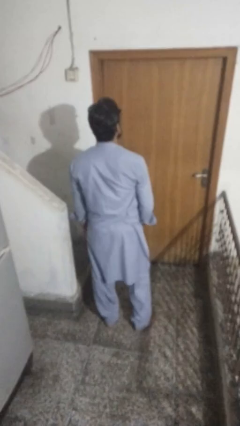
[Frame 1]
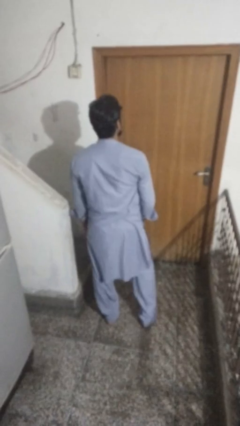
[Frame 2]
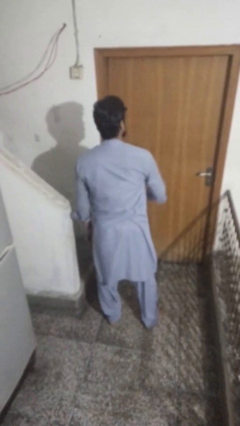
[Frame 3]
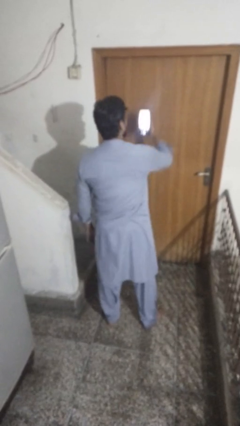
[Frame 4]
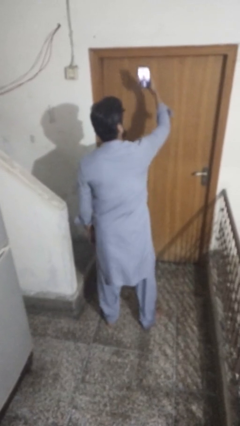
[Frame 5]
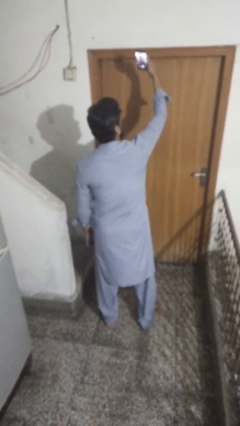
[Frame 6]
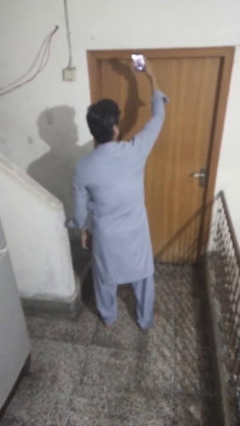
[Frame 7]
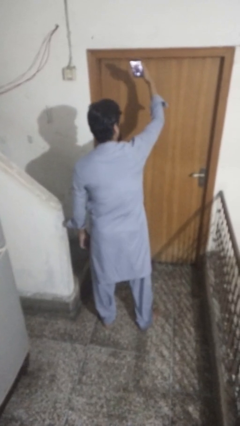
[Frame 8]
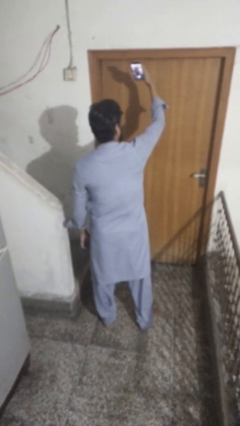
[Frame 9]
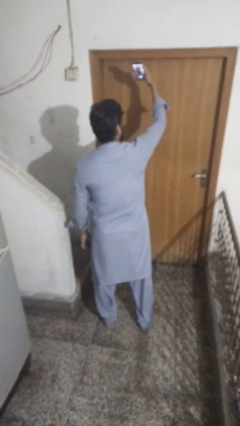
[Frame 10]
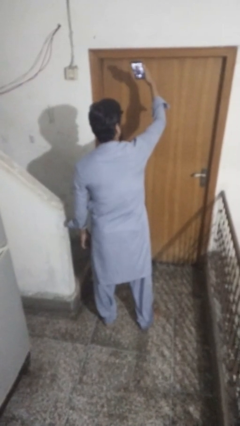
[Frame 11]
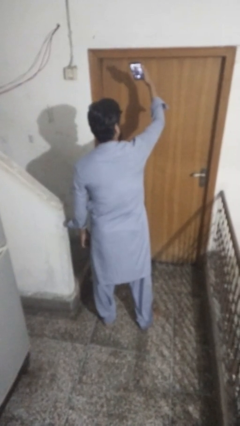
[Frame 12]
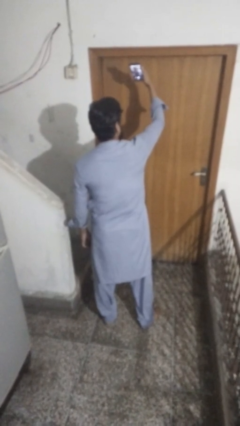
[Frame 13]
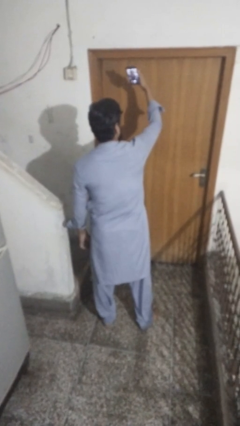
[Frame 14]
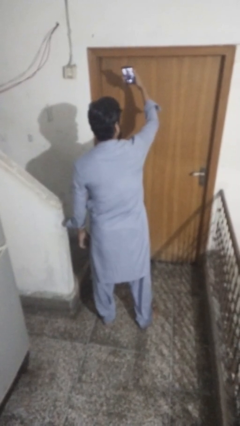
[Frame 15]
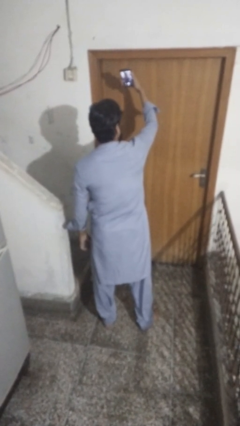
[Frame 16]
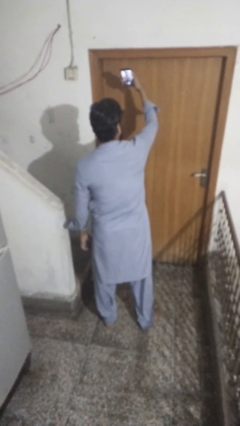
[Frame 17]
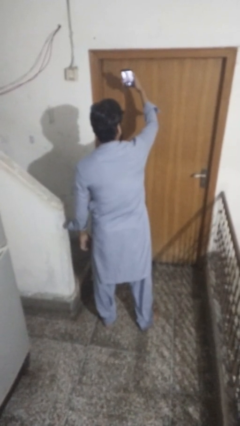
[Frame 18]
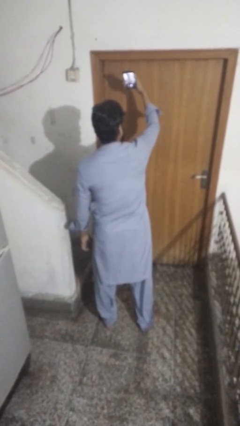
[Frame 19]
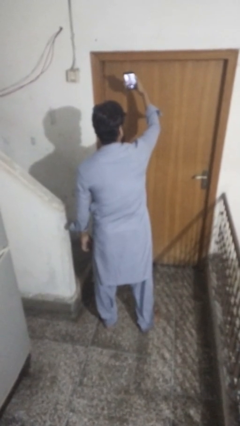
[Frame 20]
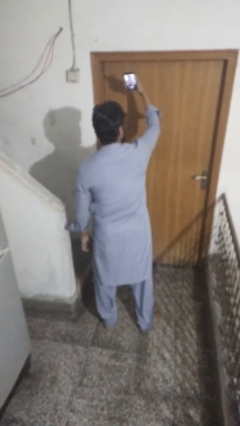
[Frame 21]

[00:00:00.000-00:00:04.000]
person takes selfie

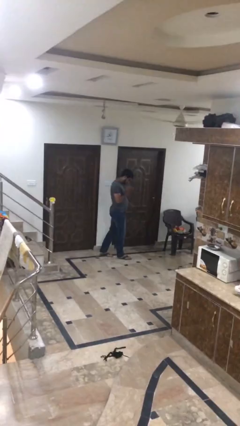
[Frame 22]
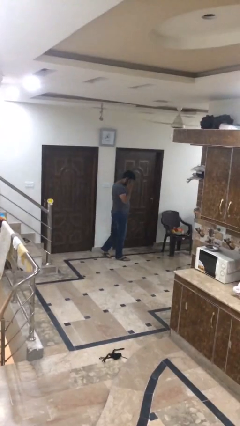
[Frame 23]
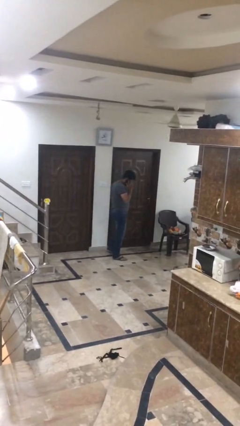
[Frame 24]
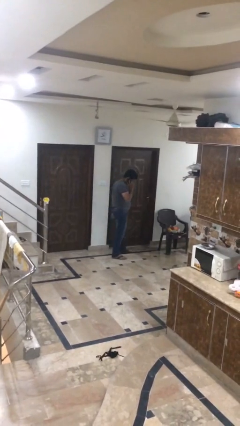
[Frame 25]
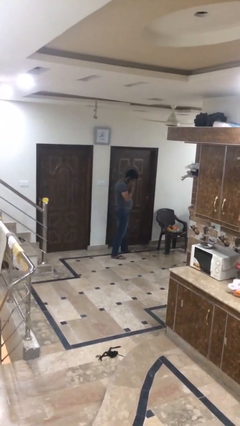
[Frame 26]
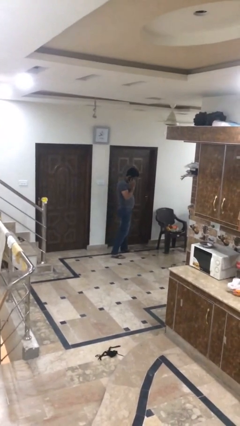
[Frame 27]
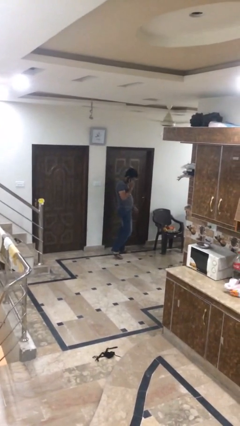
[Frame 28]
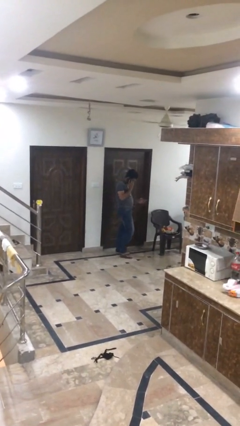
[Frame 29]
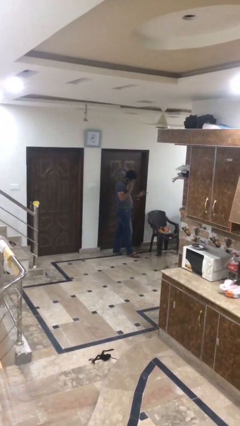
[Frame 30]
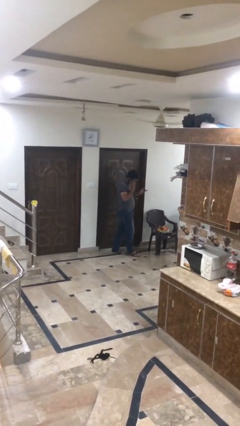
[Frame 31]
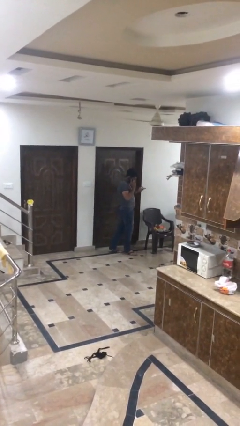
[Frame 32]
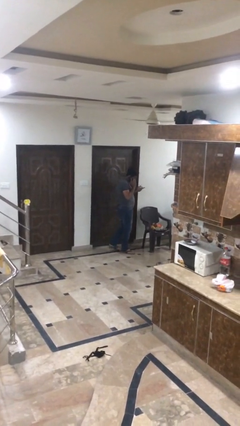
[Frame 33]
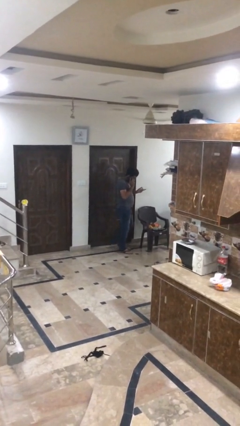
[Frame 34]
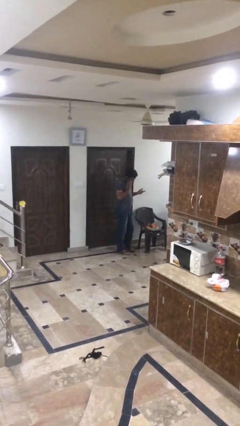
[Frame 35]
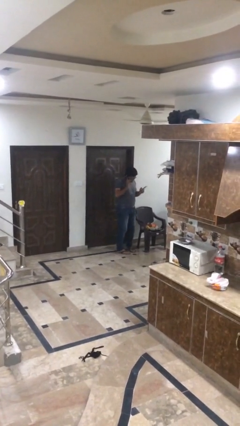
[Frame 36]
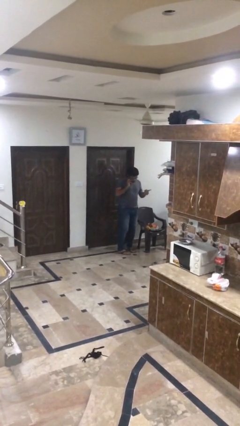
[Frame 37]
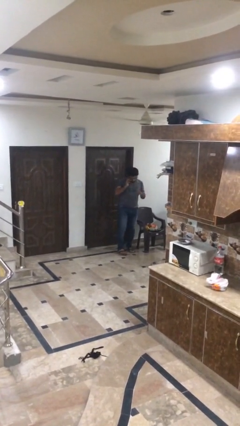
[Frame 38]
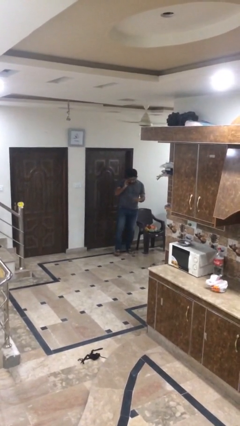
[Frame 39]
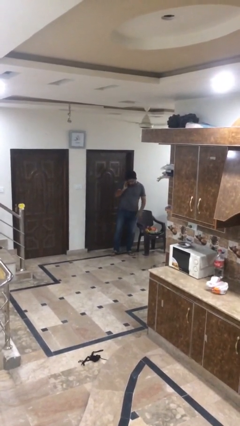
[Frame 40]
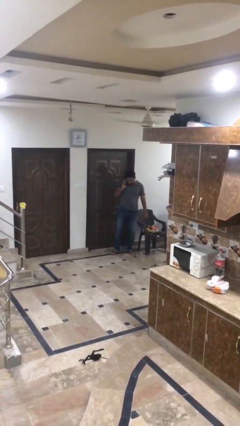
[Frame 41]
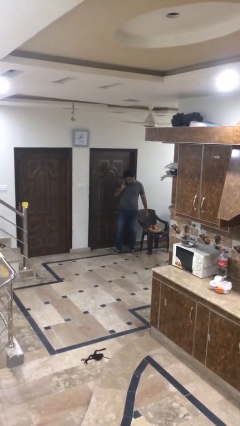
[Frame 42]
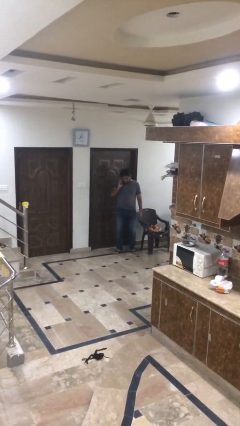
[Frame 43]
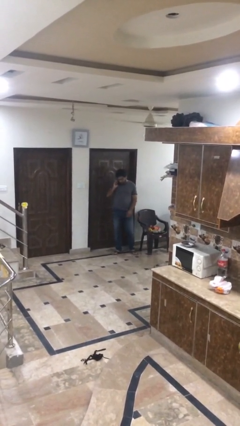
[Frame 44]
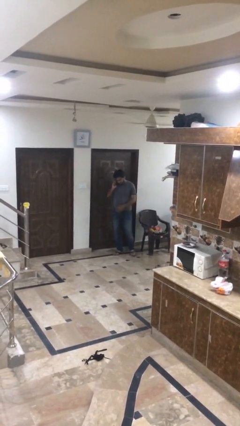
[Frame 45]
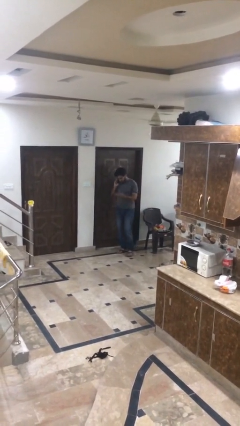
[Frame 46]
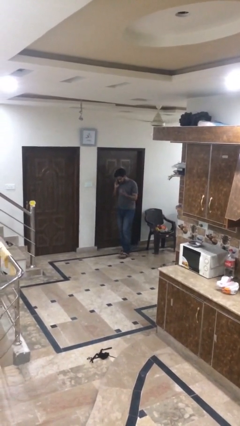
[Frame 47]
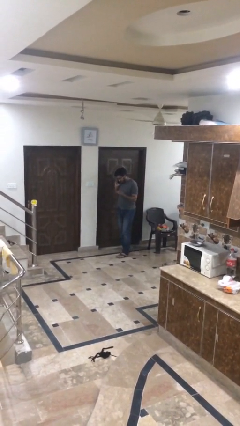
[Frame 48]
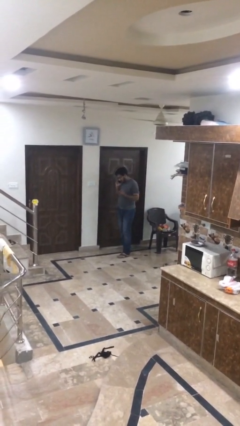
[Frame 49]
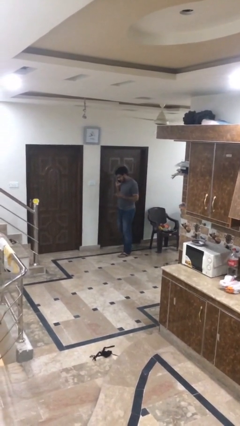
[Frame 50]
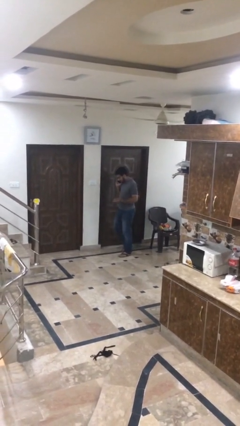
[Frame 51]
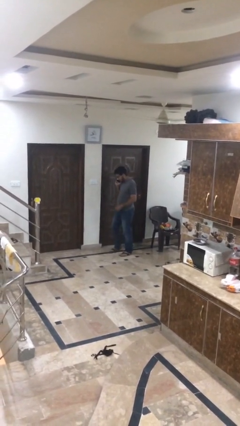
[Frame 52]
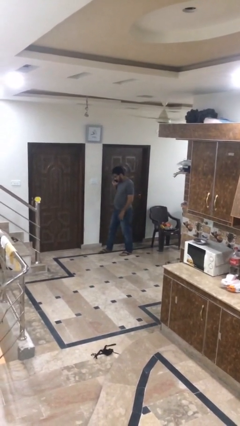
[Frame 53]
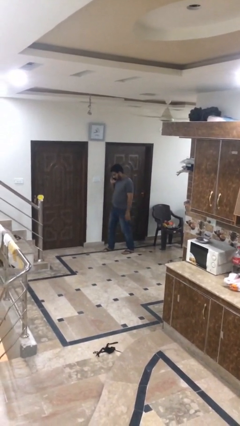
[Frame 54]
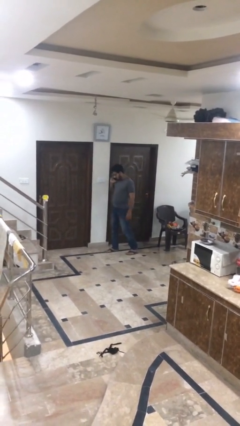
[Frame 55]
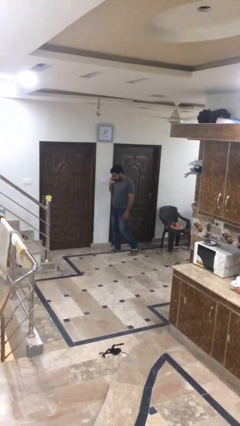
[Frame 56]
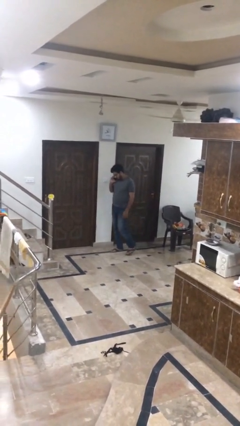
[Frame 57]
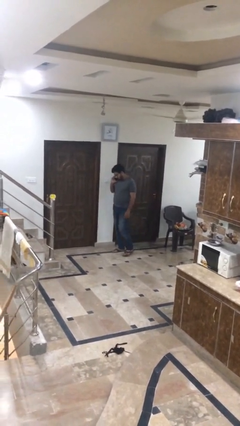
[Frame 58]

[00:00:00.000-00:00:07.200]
person talks on phone

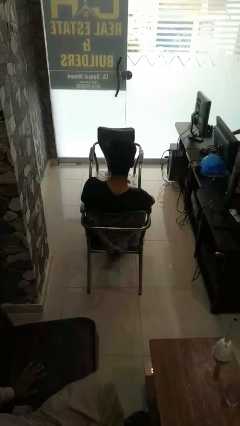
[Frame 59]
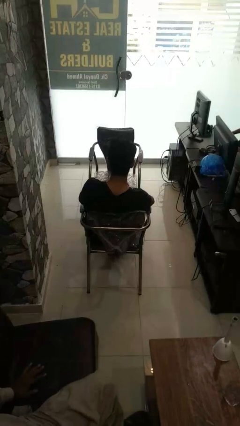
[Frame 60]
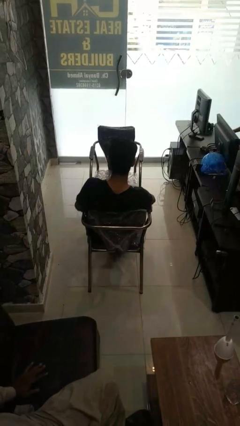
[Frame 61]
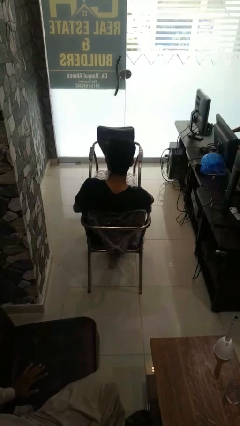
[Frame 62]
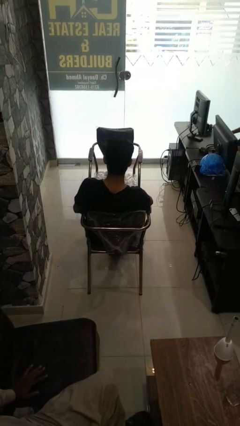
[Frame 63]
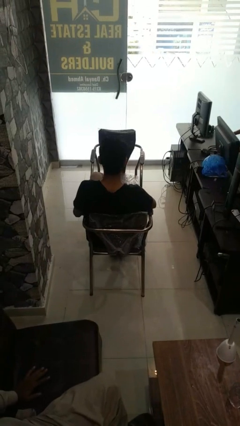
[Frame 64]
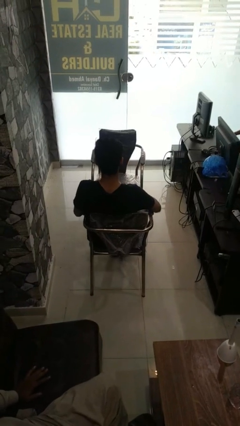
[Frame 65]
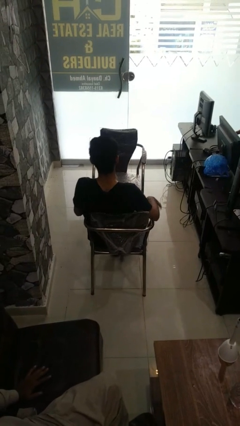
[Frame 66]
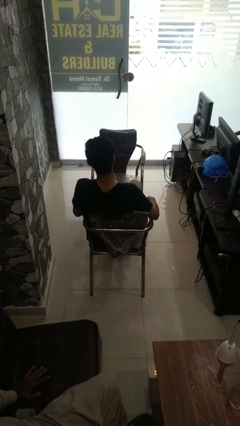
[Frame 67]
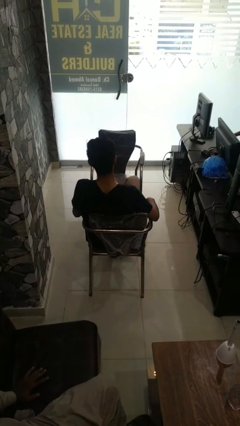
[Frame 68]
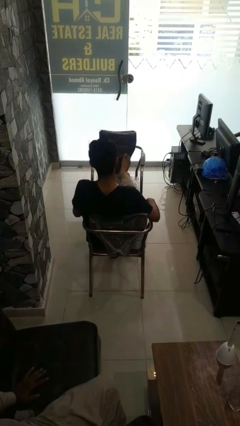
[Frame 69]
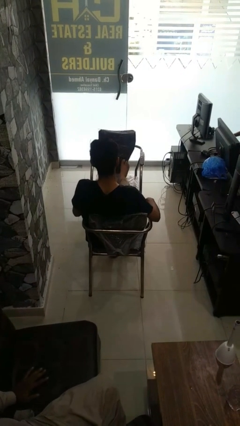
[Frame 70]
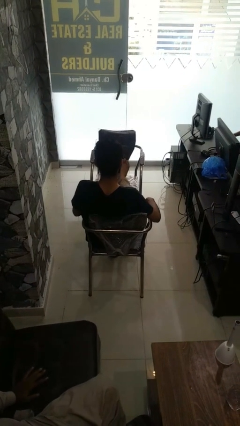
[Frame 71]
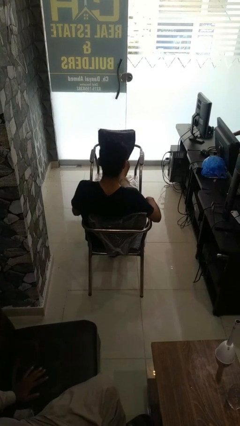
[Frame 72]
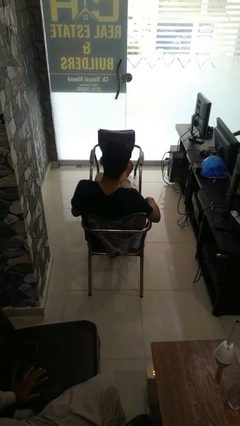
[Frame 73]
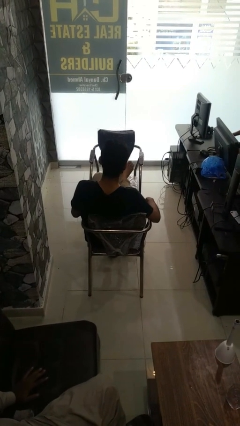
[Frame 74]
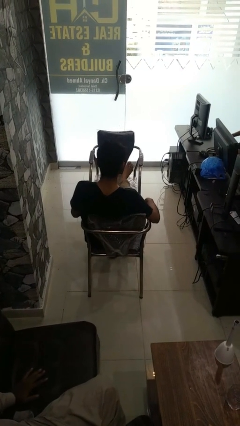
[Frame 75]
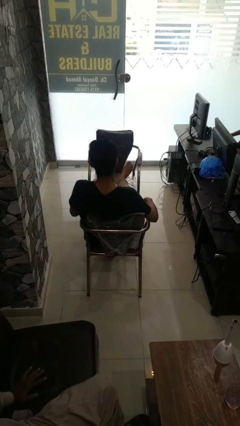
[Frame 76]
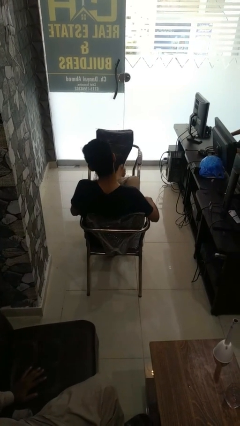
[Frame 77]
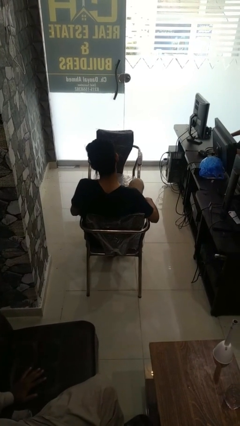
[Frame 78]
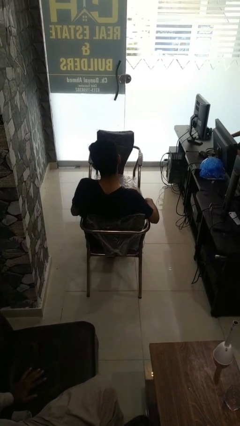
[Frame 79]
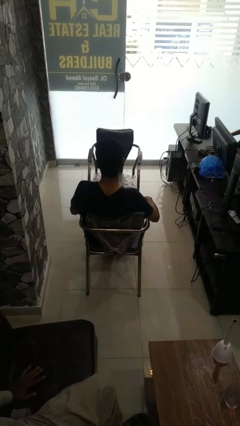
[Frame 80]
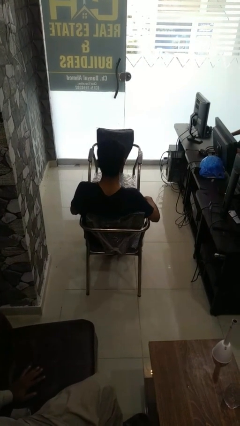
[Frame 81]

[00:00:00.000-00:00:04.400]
person puts feet up

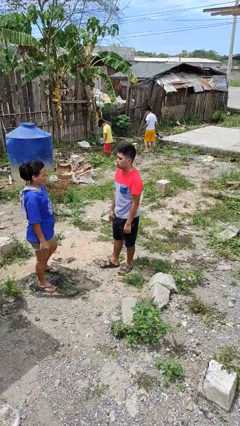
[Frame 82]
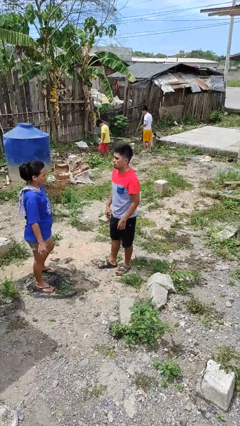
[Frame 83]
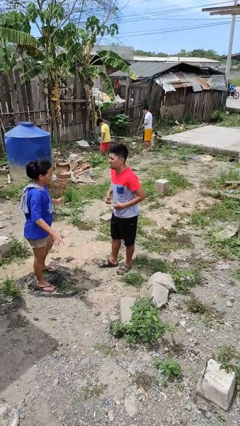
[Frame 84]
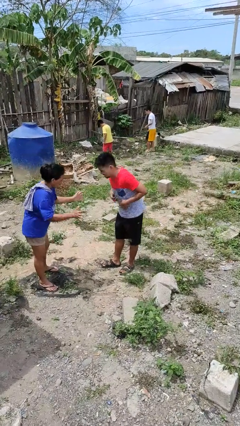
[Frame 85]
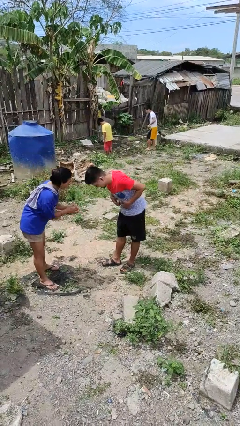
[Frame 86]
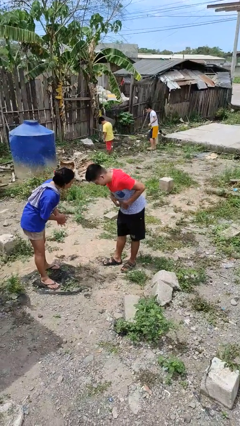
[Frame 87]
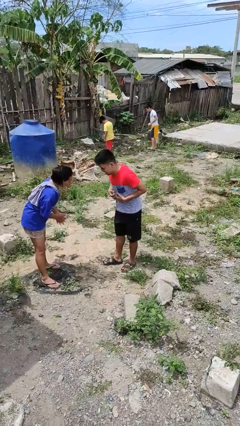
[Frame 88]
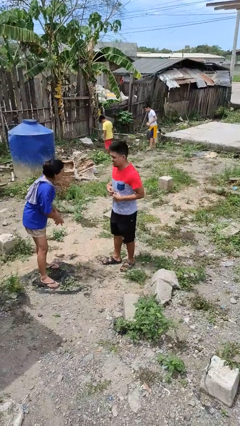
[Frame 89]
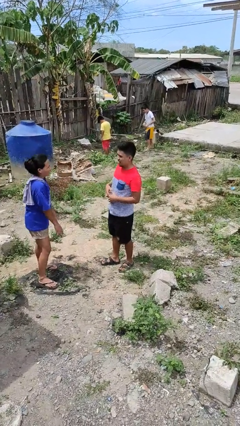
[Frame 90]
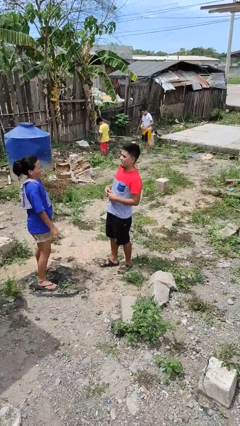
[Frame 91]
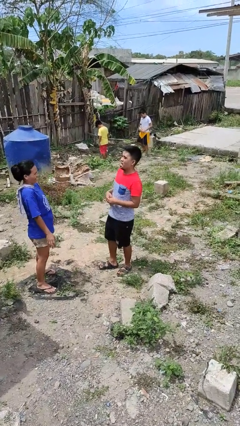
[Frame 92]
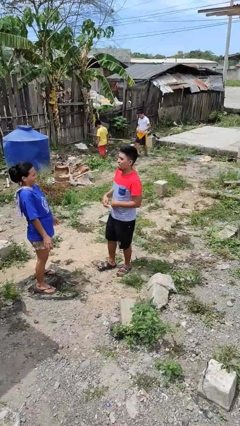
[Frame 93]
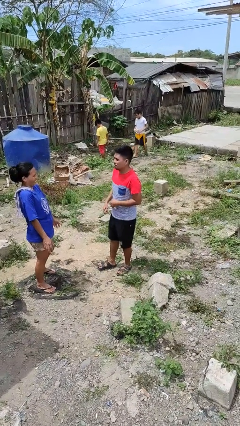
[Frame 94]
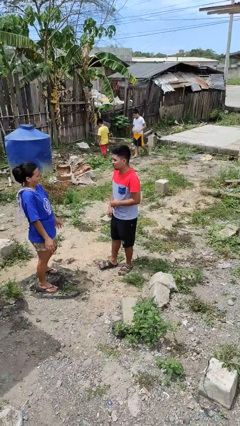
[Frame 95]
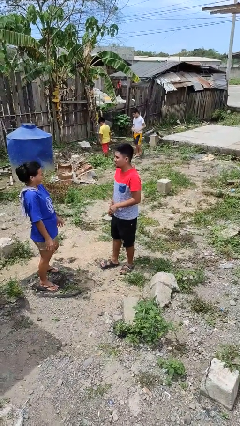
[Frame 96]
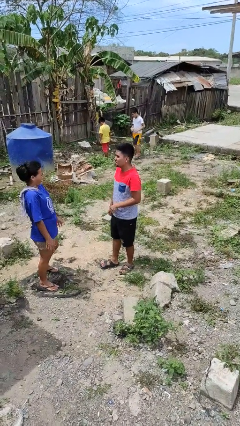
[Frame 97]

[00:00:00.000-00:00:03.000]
person laughs with person
